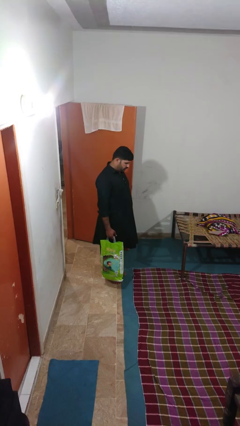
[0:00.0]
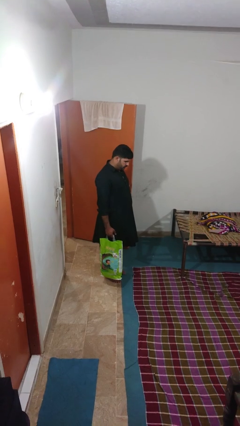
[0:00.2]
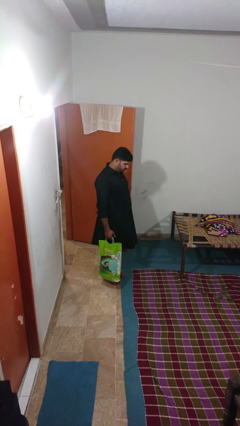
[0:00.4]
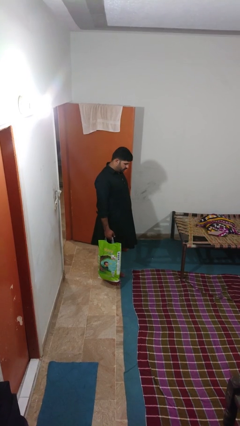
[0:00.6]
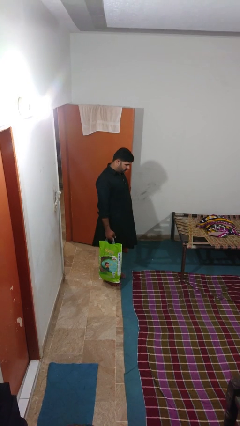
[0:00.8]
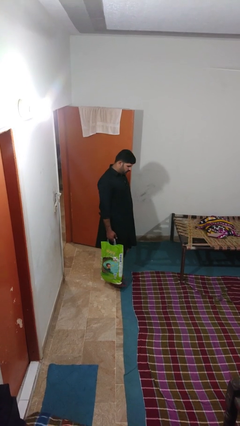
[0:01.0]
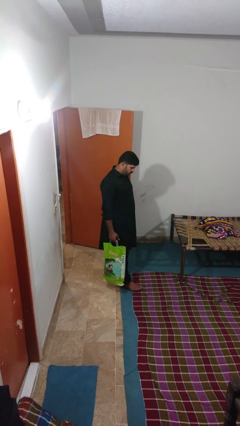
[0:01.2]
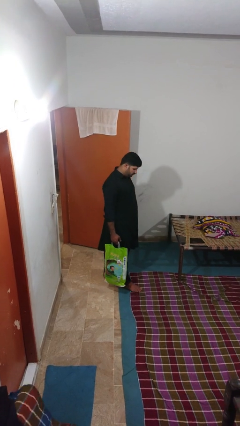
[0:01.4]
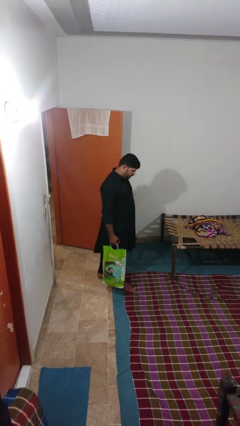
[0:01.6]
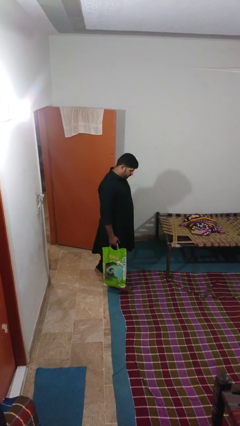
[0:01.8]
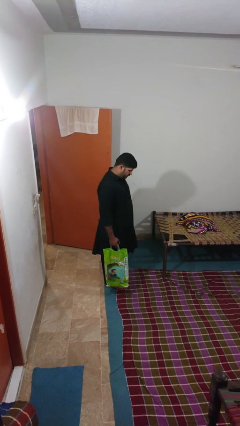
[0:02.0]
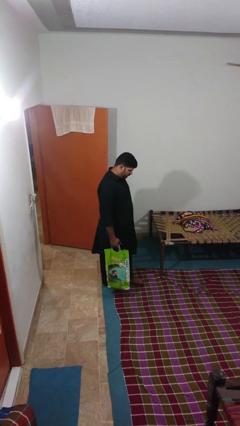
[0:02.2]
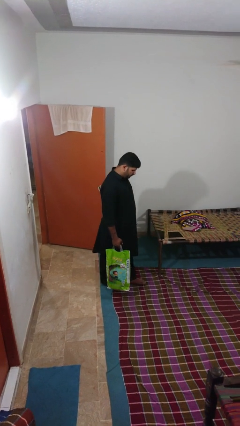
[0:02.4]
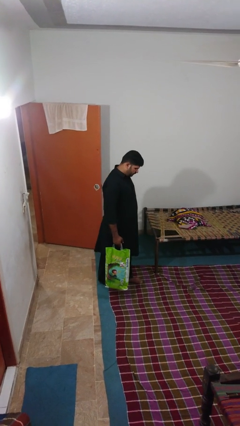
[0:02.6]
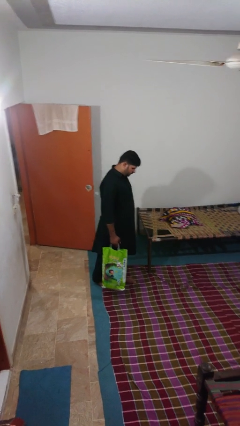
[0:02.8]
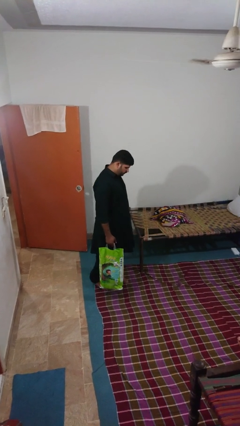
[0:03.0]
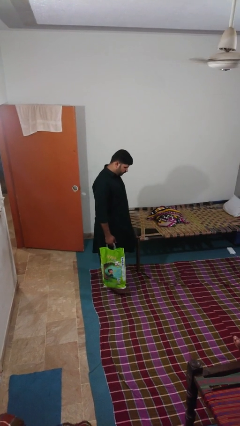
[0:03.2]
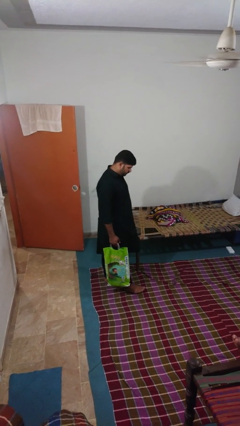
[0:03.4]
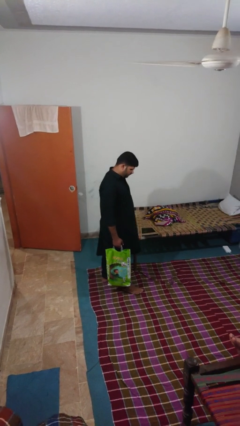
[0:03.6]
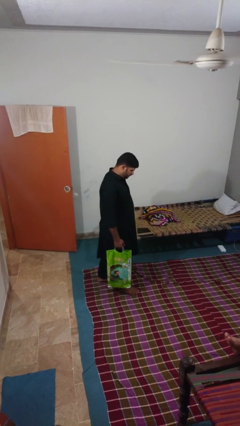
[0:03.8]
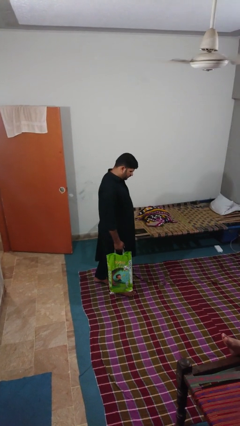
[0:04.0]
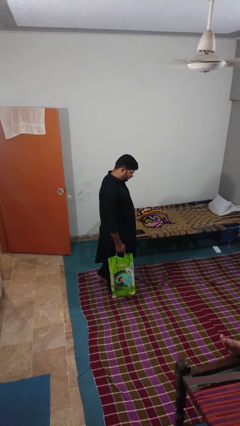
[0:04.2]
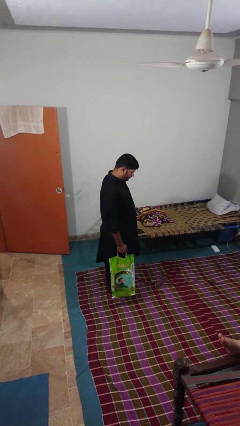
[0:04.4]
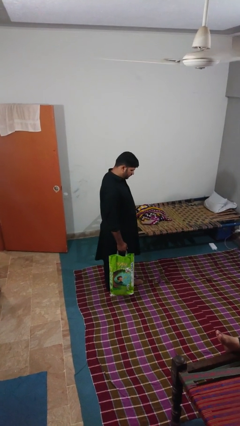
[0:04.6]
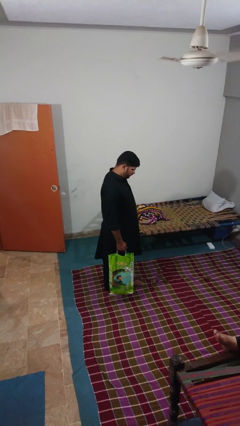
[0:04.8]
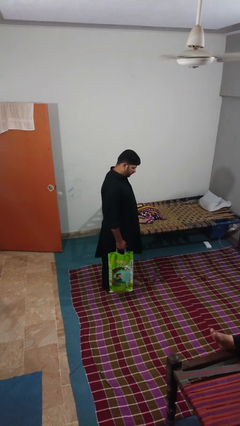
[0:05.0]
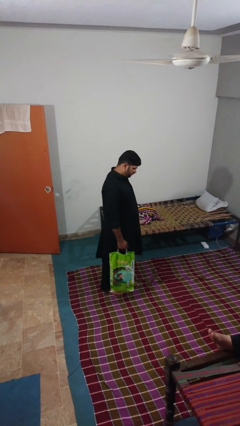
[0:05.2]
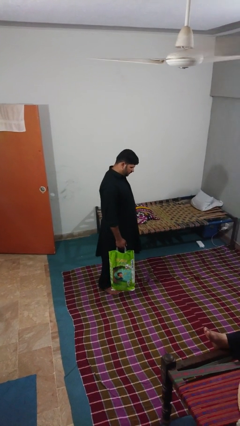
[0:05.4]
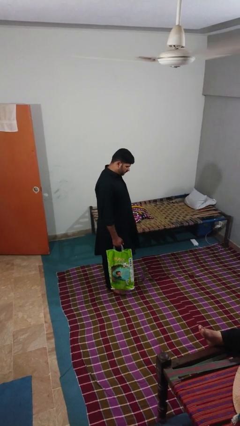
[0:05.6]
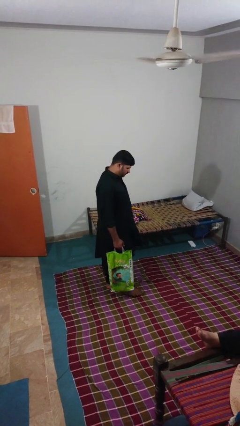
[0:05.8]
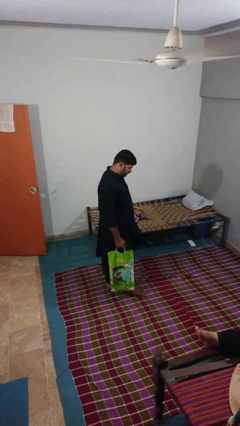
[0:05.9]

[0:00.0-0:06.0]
person carries groceries

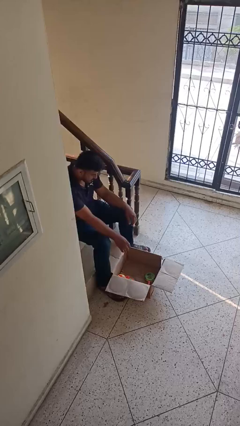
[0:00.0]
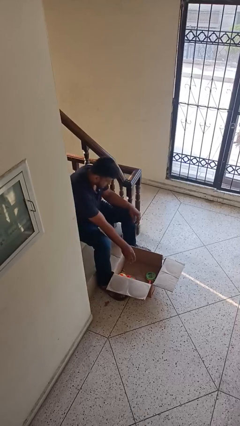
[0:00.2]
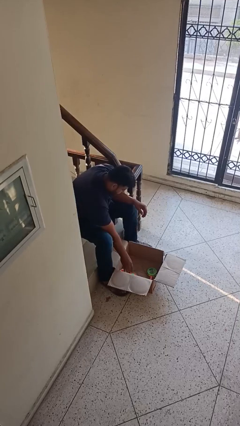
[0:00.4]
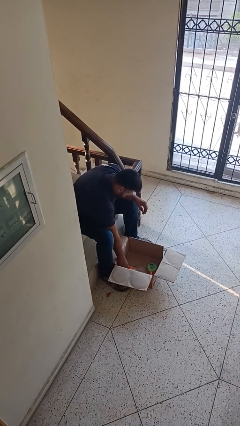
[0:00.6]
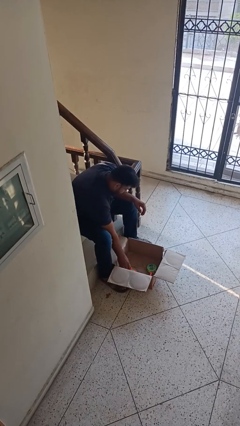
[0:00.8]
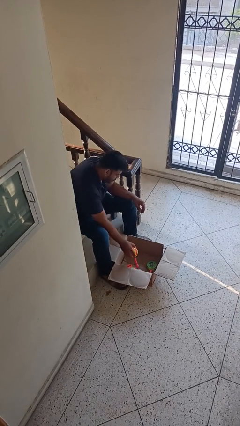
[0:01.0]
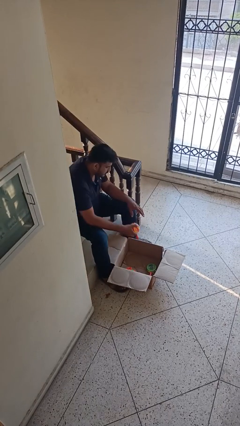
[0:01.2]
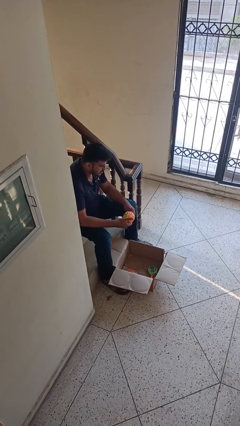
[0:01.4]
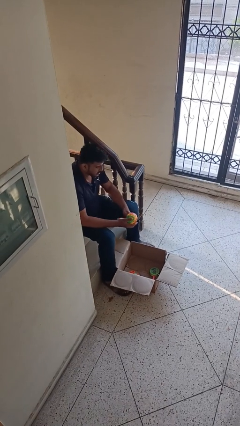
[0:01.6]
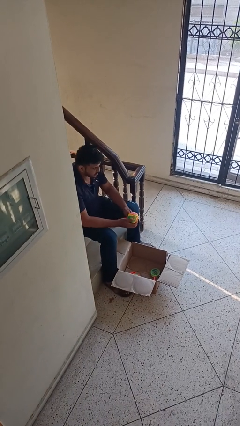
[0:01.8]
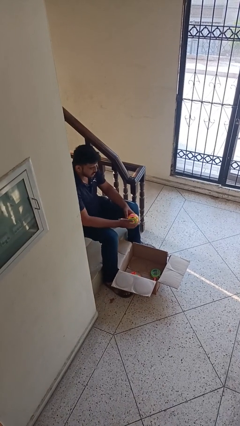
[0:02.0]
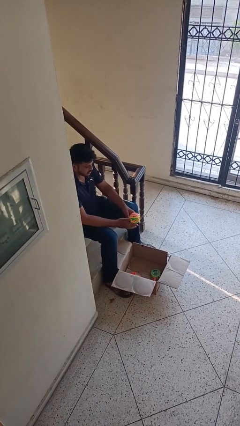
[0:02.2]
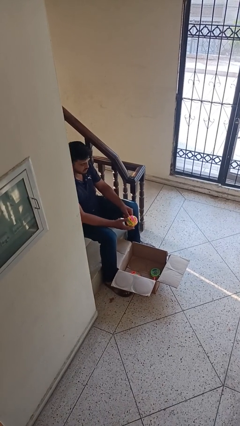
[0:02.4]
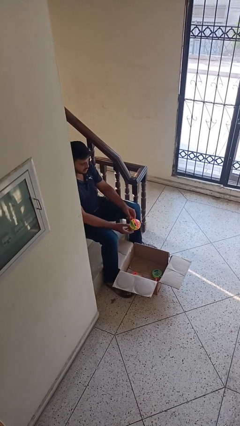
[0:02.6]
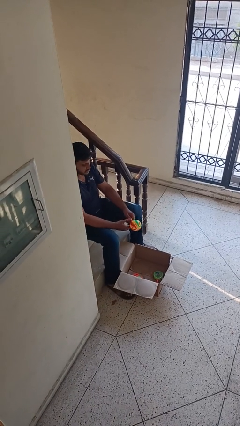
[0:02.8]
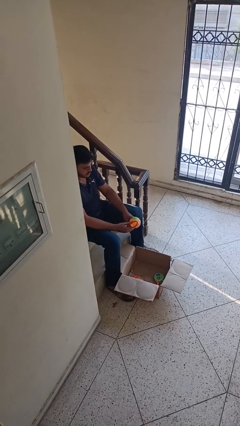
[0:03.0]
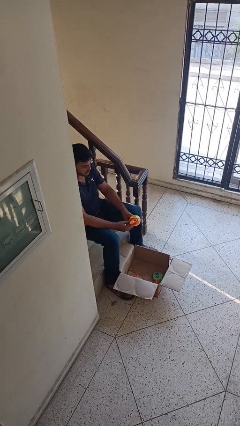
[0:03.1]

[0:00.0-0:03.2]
person takes object from box

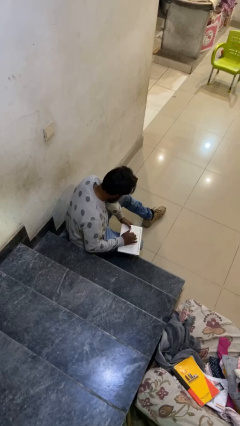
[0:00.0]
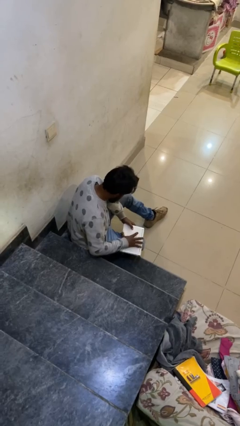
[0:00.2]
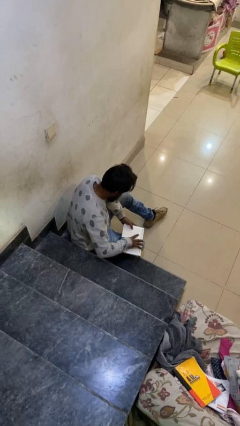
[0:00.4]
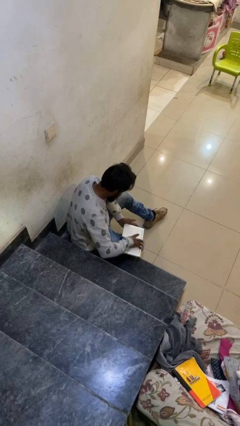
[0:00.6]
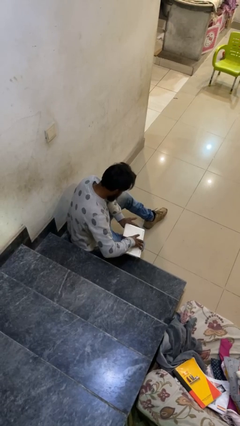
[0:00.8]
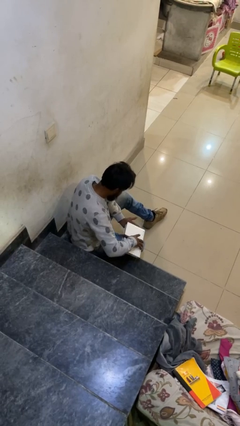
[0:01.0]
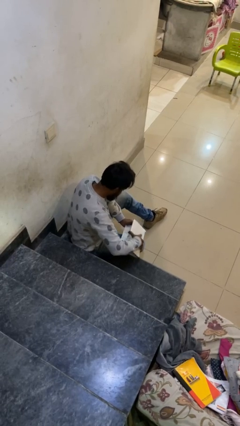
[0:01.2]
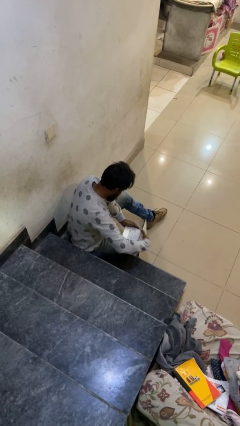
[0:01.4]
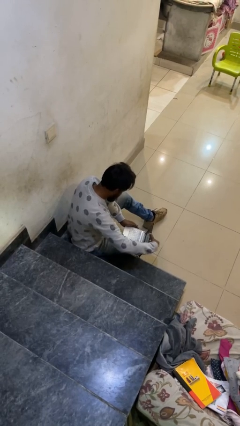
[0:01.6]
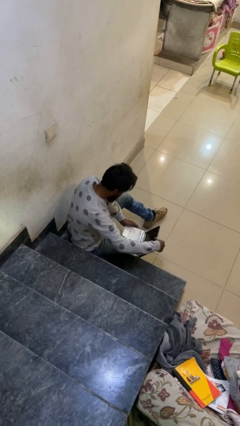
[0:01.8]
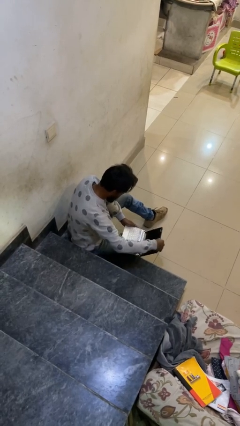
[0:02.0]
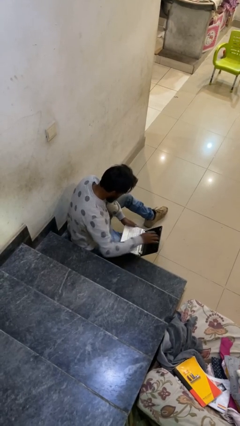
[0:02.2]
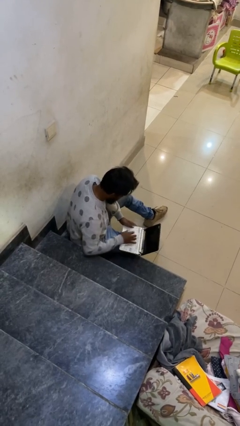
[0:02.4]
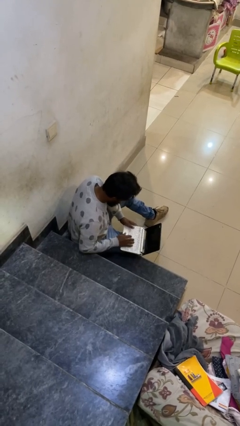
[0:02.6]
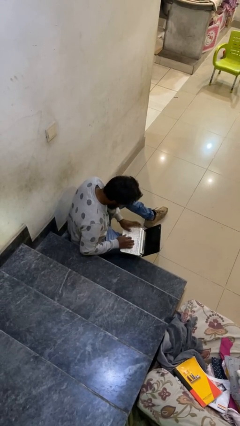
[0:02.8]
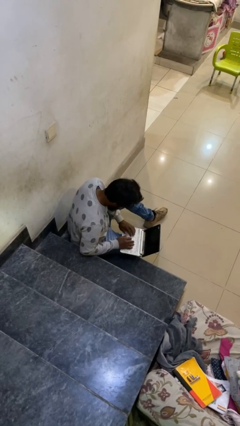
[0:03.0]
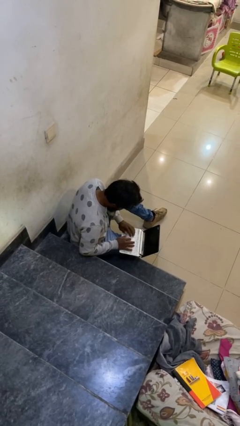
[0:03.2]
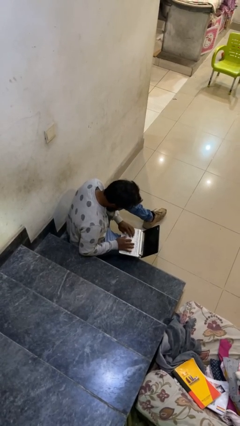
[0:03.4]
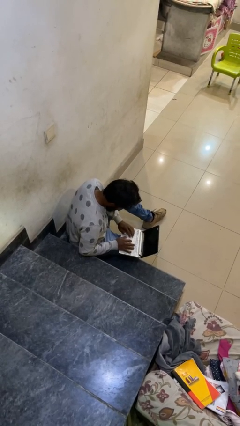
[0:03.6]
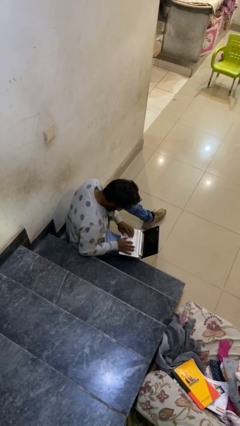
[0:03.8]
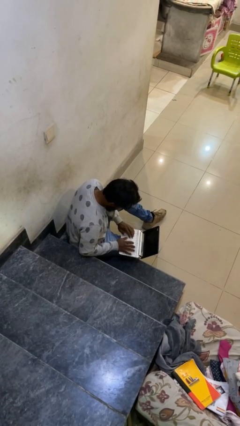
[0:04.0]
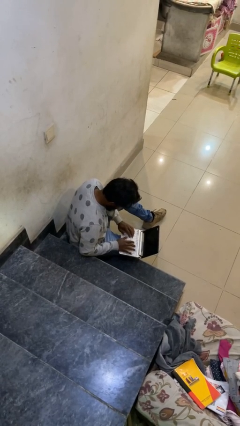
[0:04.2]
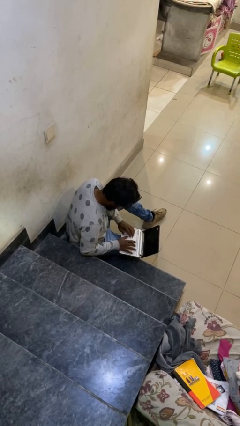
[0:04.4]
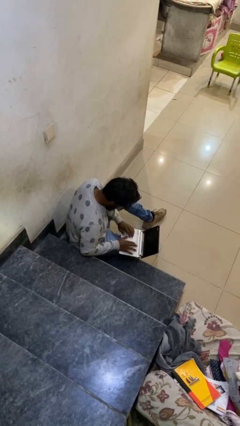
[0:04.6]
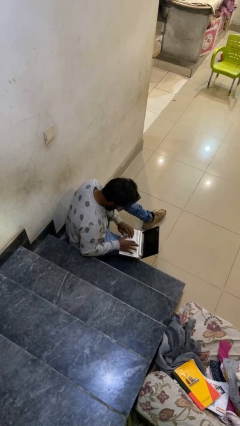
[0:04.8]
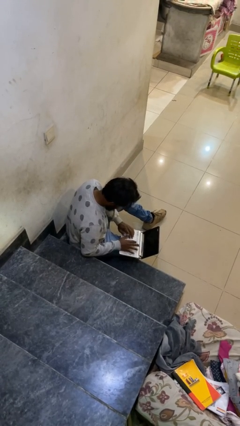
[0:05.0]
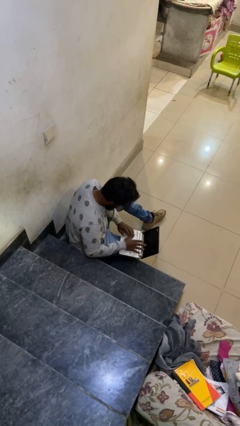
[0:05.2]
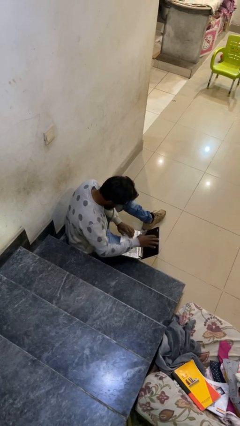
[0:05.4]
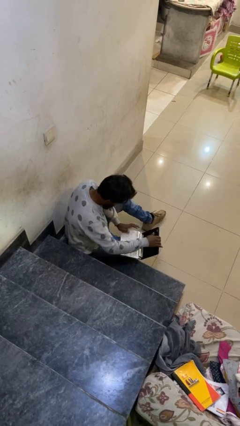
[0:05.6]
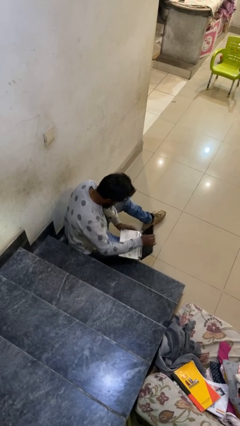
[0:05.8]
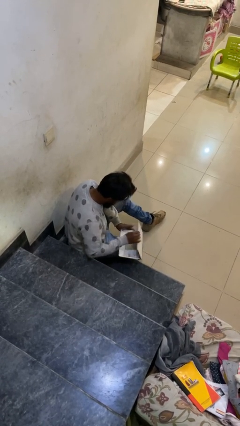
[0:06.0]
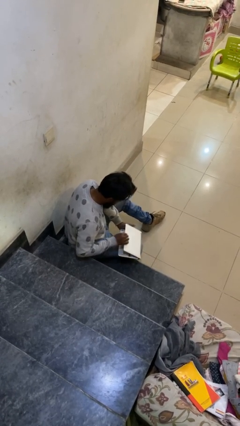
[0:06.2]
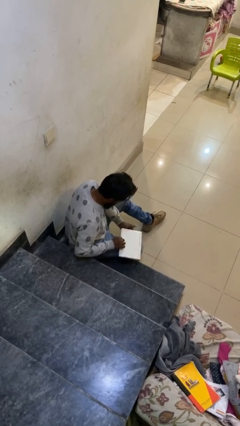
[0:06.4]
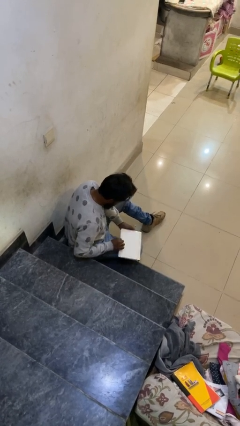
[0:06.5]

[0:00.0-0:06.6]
person interacts with laptop

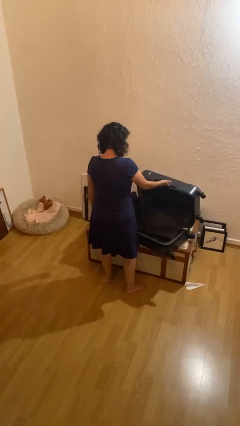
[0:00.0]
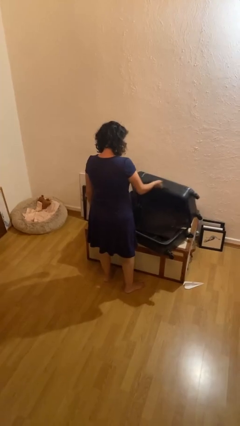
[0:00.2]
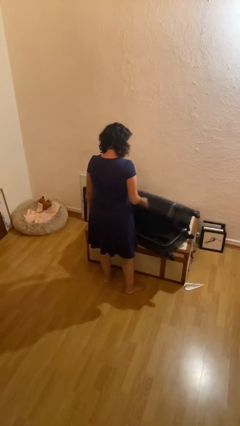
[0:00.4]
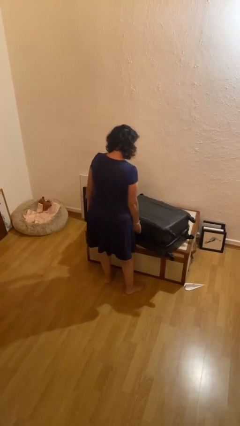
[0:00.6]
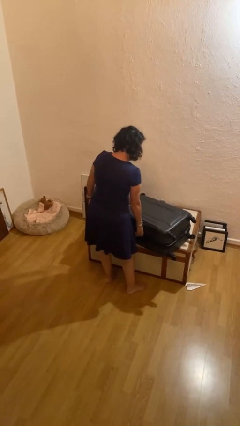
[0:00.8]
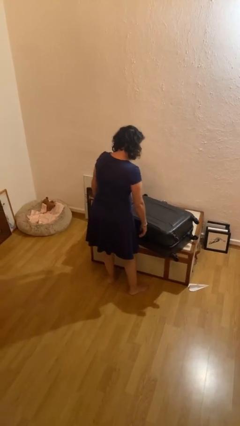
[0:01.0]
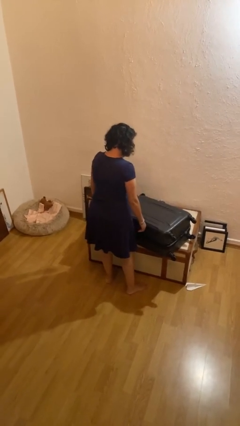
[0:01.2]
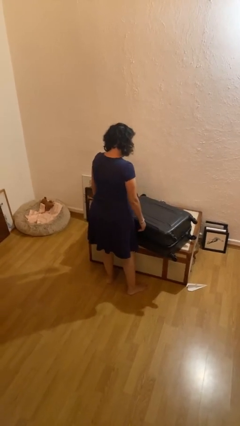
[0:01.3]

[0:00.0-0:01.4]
person closes suitcase

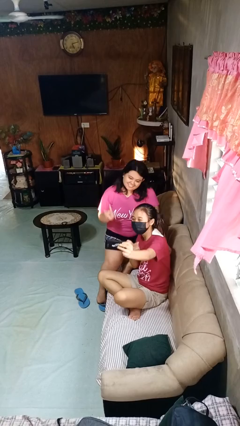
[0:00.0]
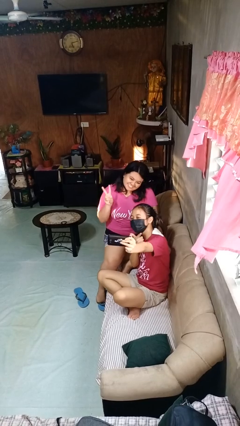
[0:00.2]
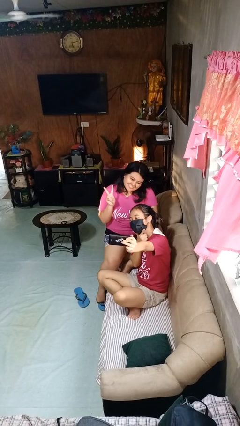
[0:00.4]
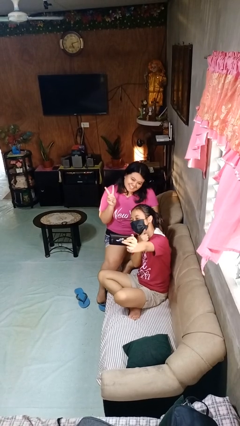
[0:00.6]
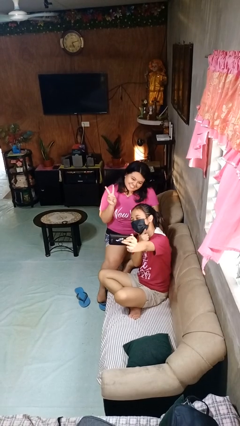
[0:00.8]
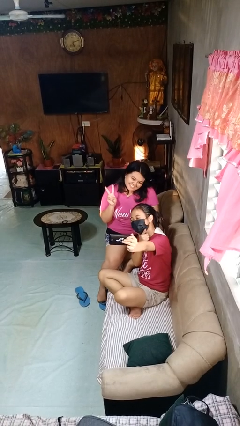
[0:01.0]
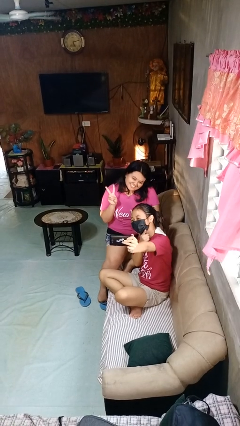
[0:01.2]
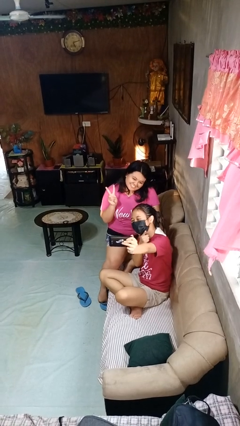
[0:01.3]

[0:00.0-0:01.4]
person takes selfie with person
